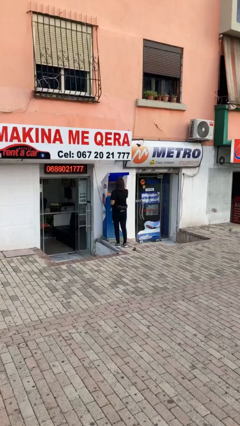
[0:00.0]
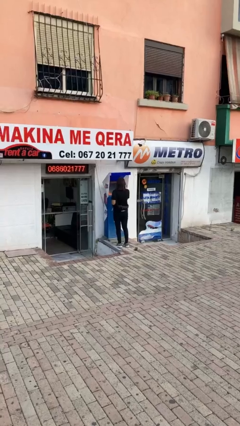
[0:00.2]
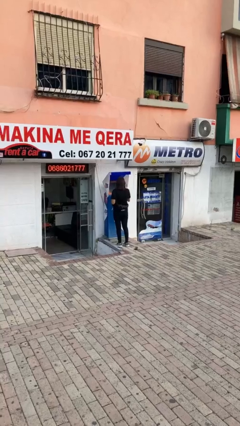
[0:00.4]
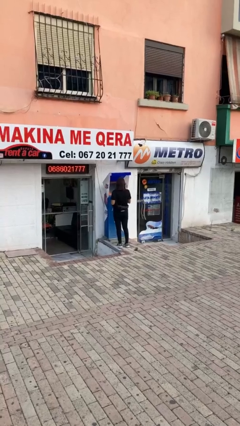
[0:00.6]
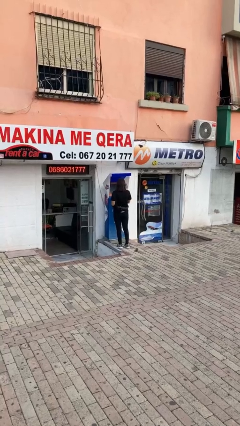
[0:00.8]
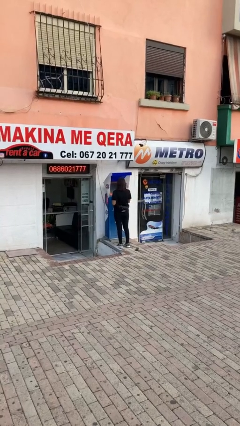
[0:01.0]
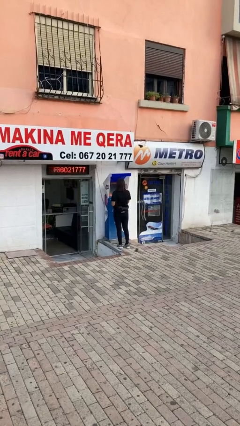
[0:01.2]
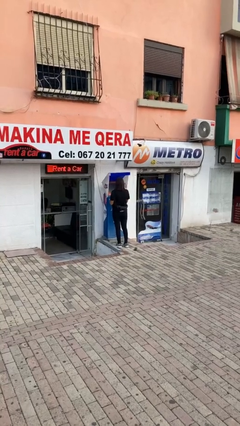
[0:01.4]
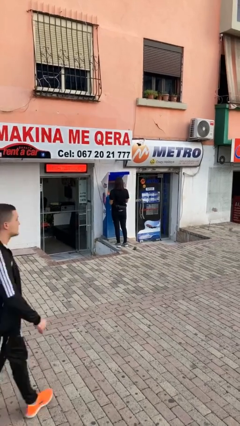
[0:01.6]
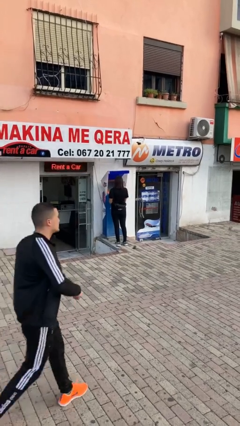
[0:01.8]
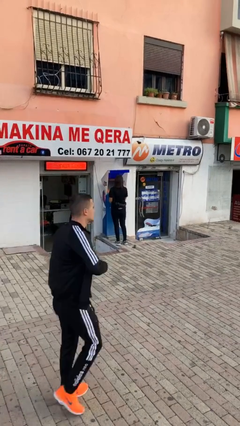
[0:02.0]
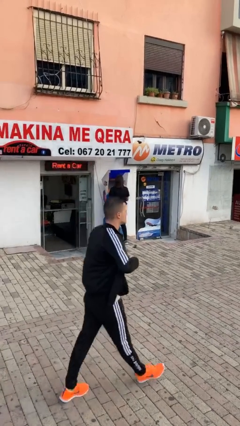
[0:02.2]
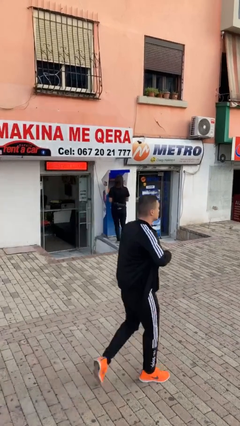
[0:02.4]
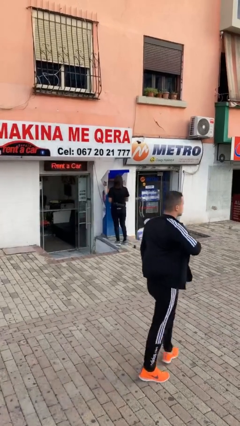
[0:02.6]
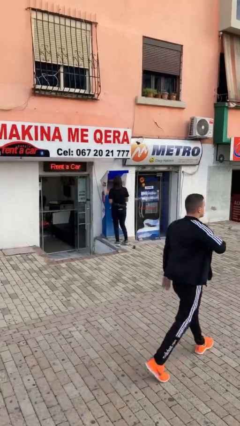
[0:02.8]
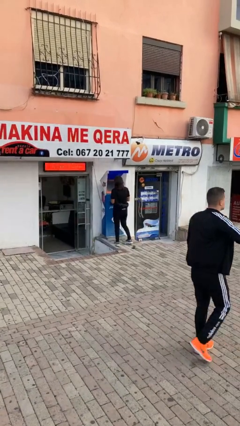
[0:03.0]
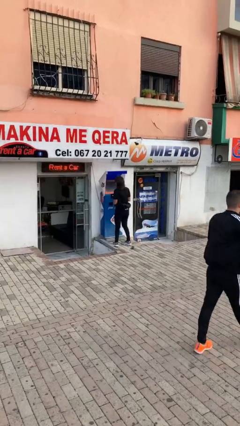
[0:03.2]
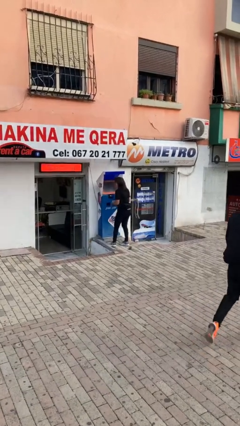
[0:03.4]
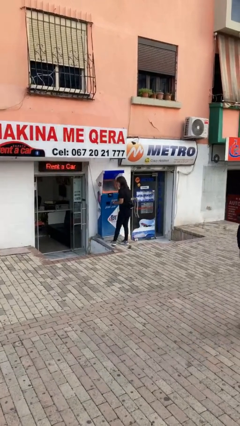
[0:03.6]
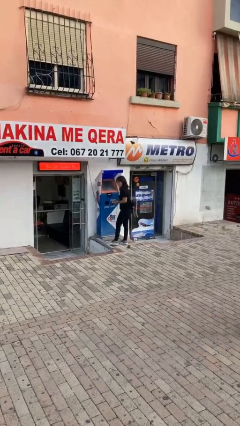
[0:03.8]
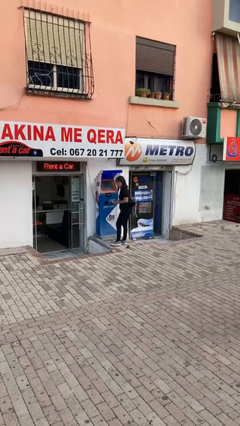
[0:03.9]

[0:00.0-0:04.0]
person purchases from machine

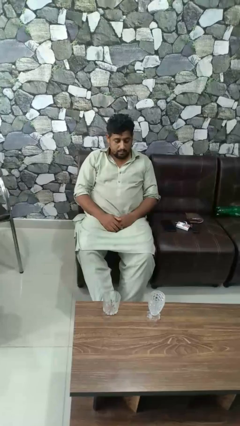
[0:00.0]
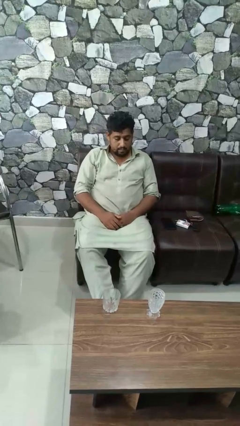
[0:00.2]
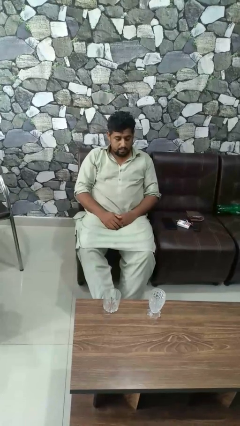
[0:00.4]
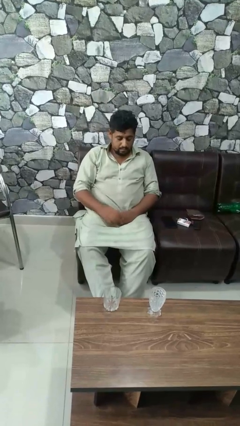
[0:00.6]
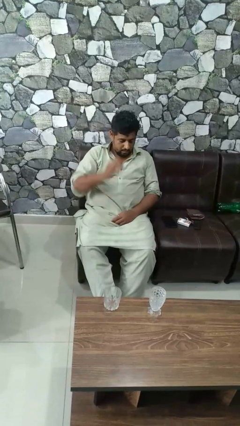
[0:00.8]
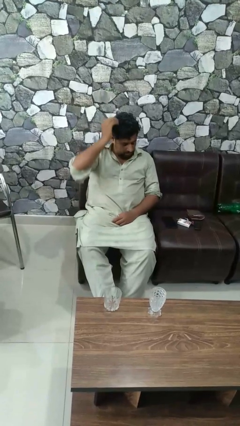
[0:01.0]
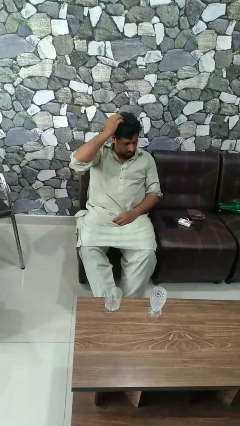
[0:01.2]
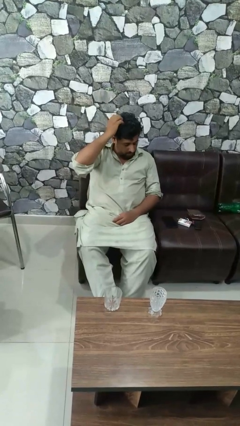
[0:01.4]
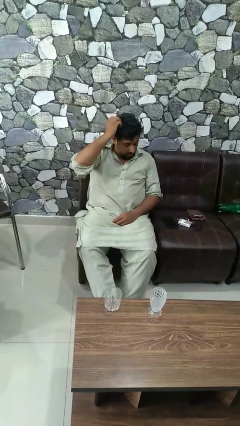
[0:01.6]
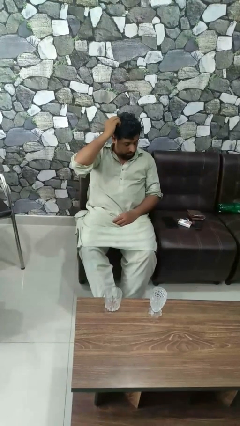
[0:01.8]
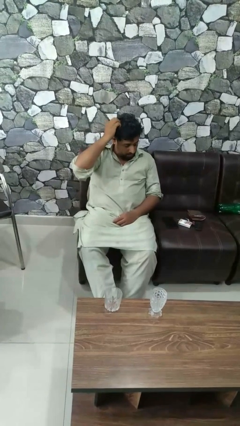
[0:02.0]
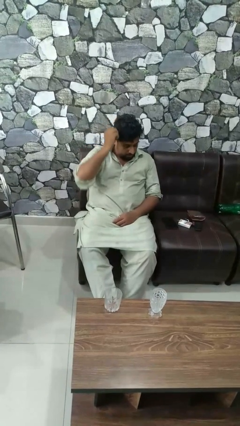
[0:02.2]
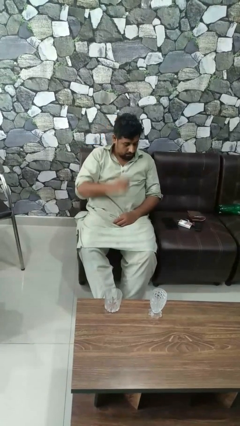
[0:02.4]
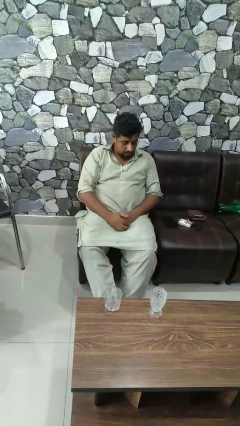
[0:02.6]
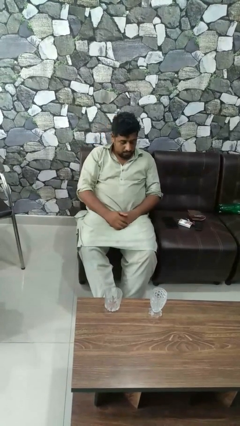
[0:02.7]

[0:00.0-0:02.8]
person scratches face

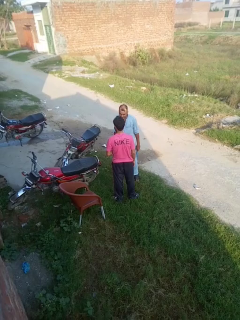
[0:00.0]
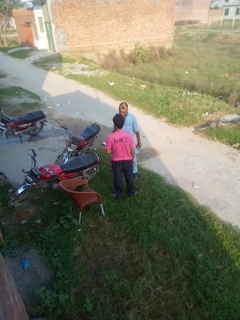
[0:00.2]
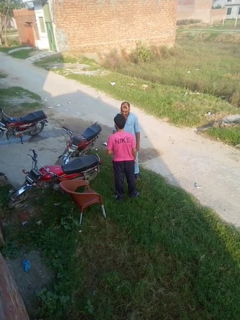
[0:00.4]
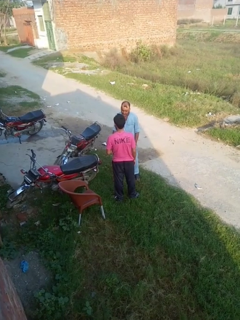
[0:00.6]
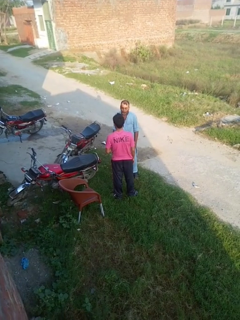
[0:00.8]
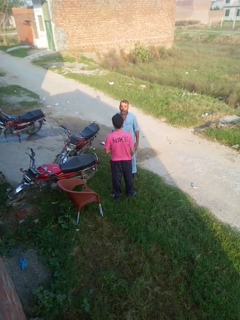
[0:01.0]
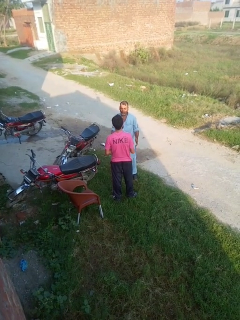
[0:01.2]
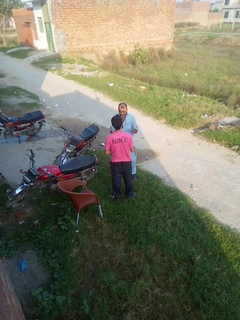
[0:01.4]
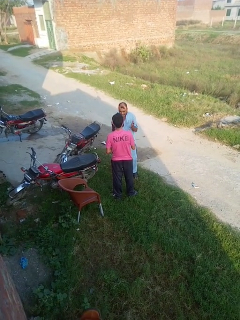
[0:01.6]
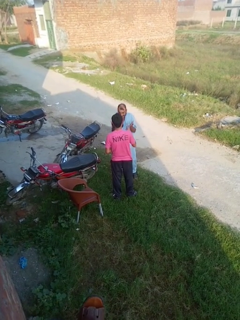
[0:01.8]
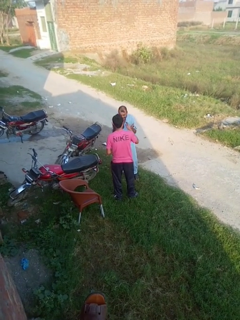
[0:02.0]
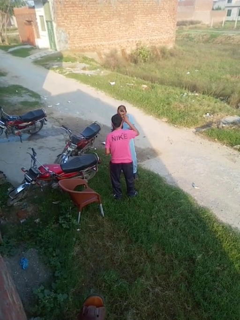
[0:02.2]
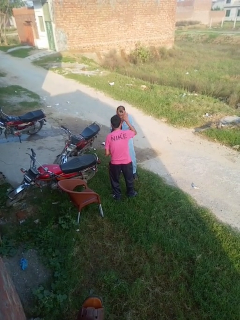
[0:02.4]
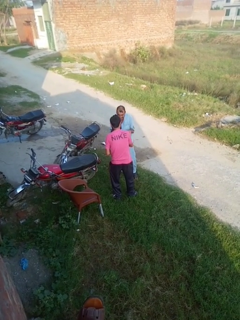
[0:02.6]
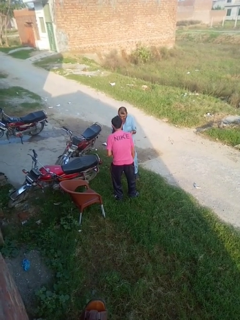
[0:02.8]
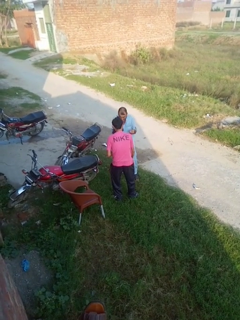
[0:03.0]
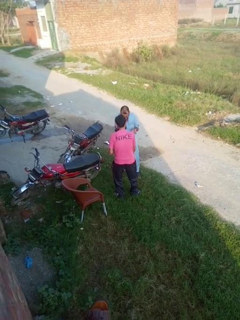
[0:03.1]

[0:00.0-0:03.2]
person laughs with person

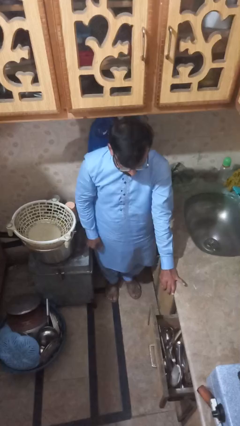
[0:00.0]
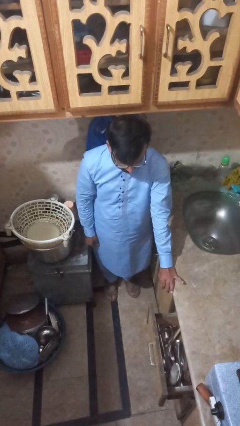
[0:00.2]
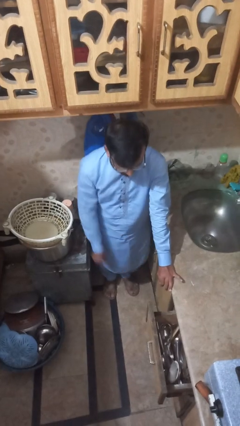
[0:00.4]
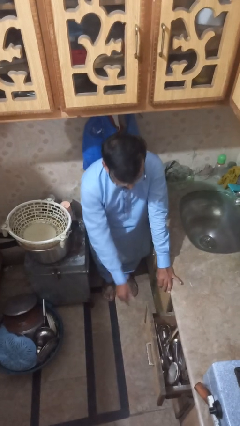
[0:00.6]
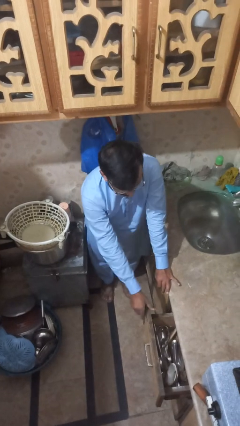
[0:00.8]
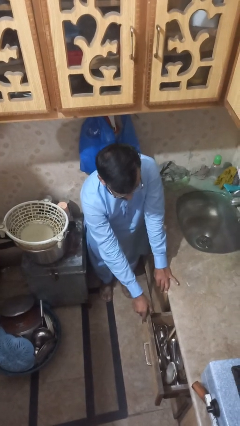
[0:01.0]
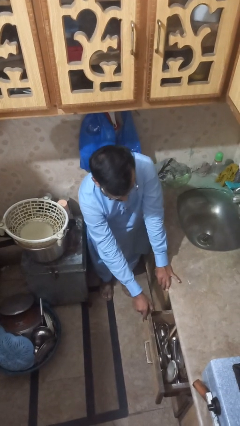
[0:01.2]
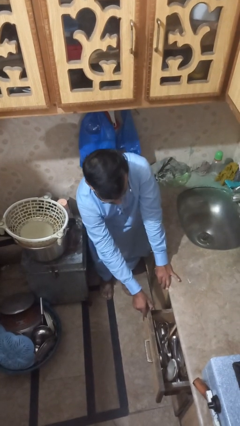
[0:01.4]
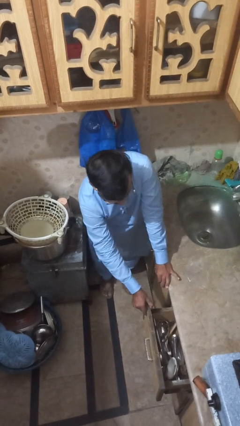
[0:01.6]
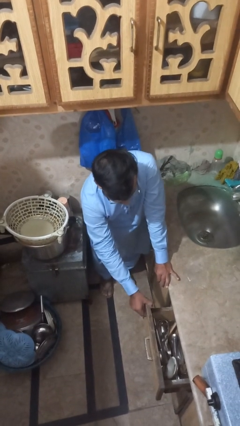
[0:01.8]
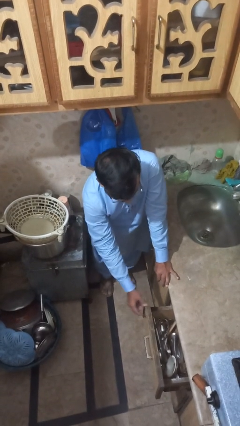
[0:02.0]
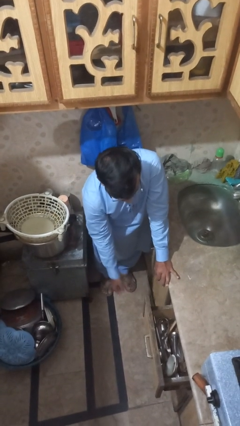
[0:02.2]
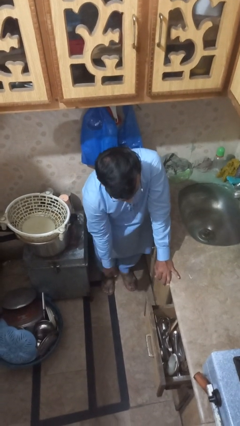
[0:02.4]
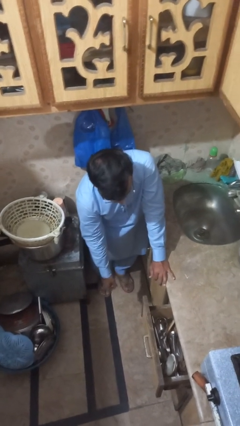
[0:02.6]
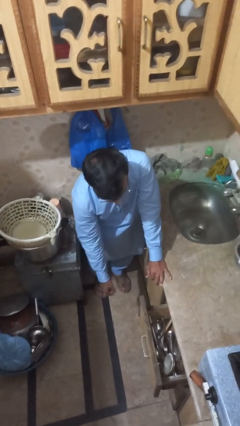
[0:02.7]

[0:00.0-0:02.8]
person opens kitchen drawer

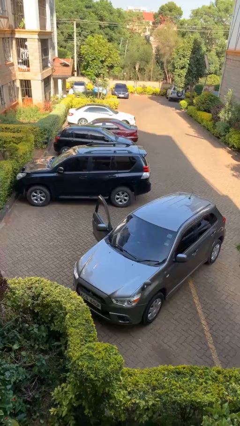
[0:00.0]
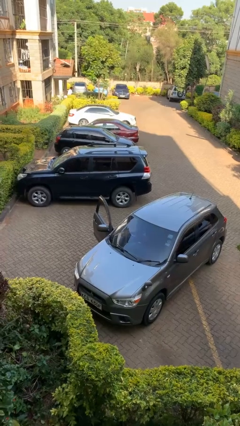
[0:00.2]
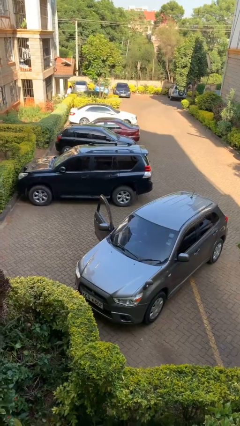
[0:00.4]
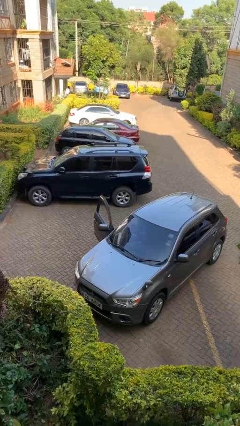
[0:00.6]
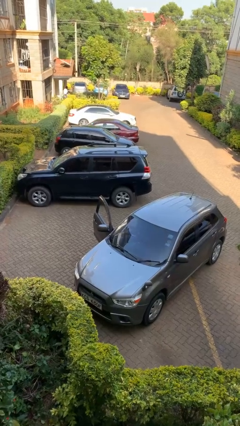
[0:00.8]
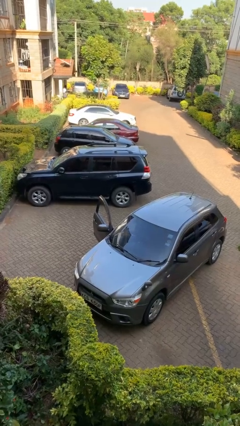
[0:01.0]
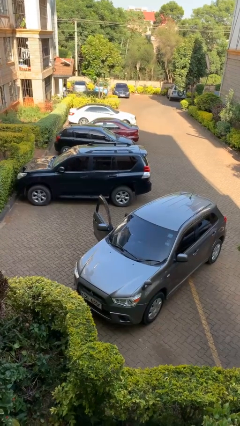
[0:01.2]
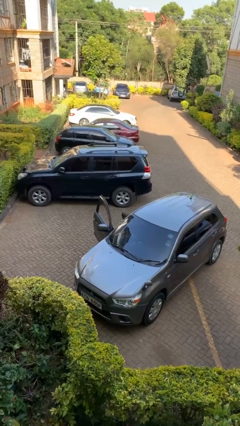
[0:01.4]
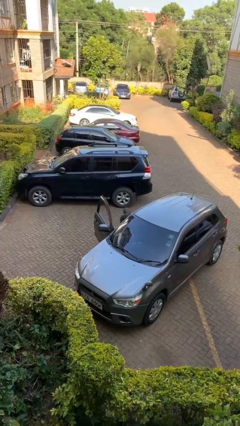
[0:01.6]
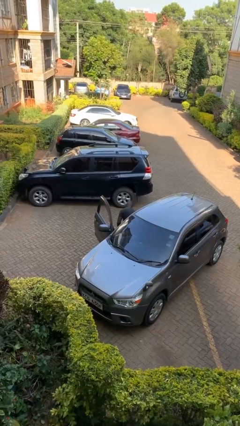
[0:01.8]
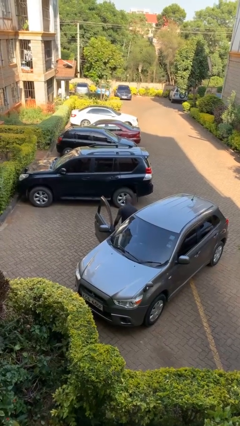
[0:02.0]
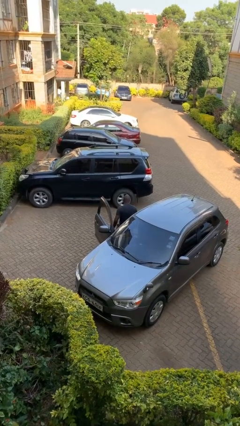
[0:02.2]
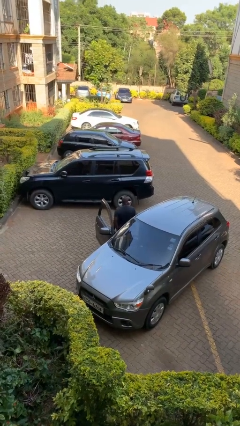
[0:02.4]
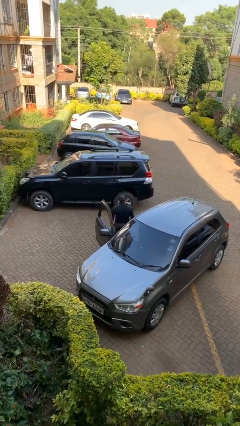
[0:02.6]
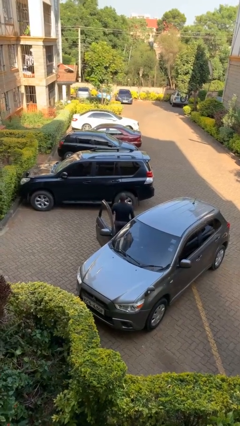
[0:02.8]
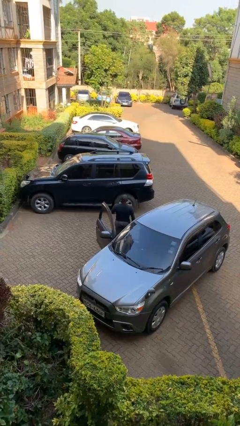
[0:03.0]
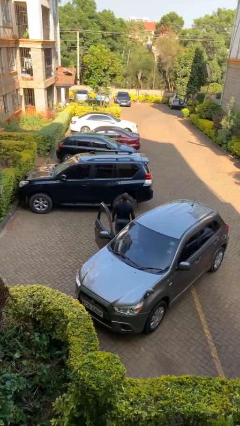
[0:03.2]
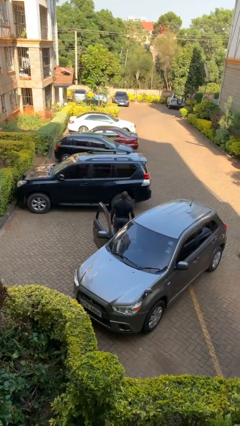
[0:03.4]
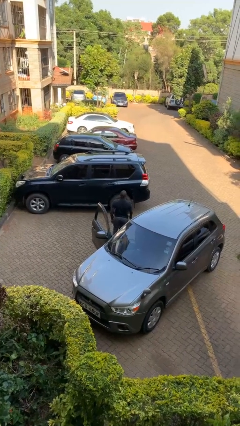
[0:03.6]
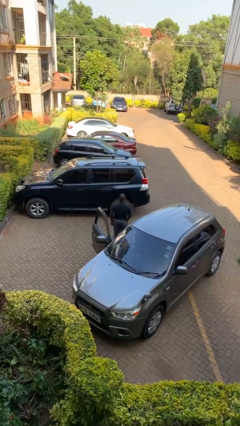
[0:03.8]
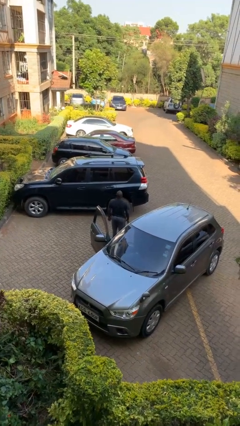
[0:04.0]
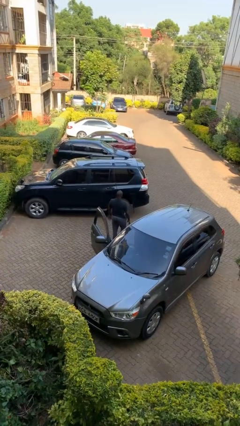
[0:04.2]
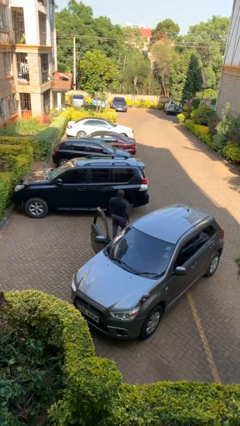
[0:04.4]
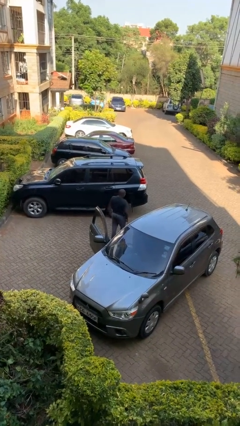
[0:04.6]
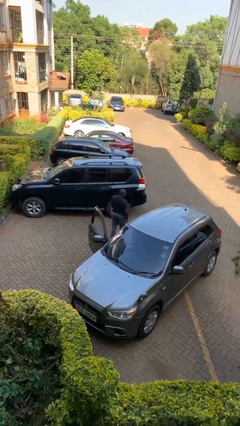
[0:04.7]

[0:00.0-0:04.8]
person exits car

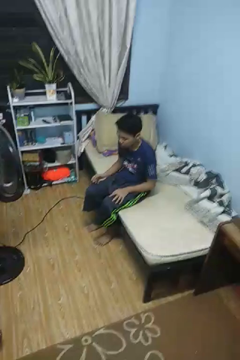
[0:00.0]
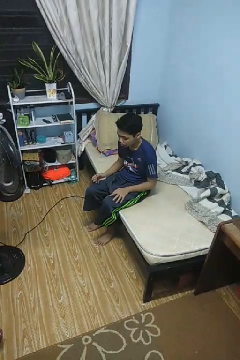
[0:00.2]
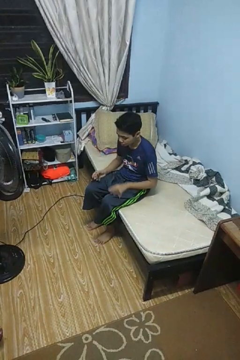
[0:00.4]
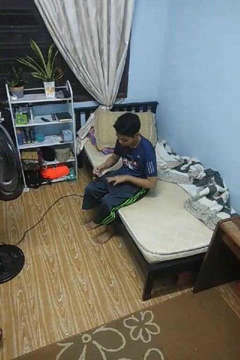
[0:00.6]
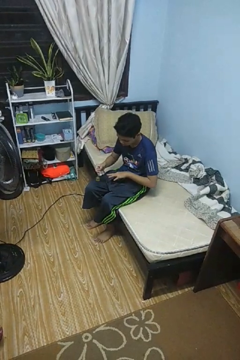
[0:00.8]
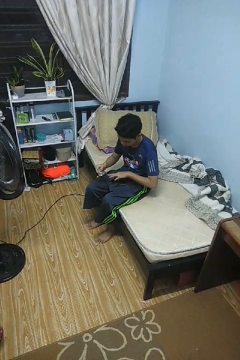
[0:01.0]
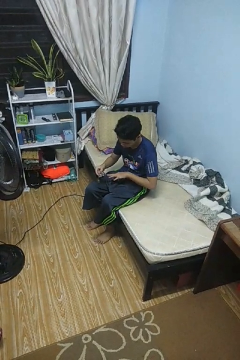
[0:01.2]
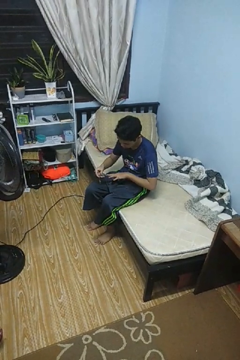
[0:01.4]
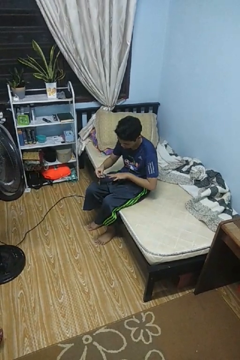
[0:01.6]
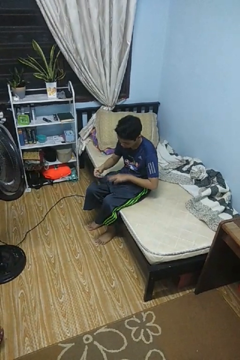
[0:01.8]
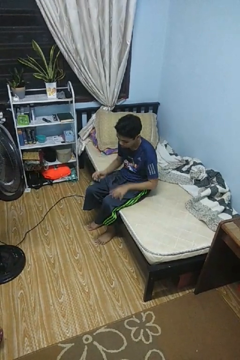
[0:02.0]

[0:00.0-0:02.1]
person clips fingernails
